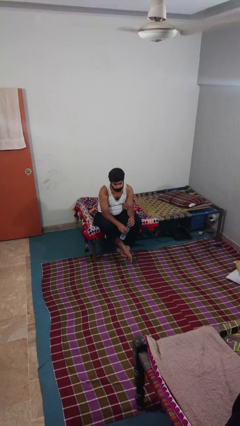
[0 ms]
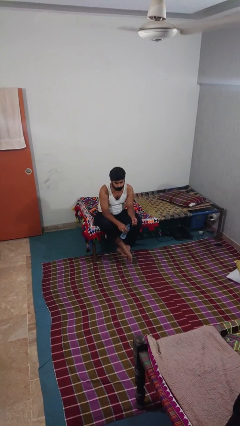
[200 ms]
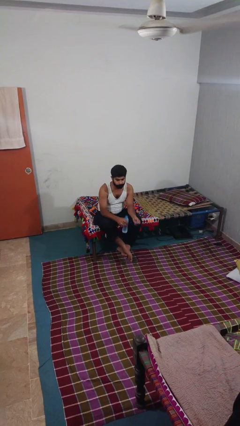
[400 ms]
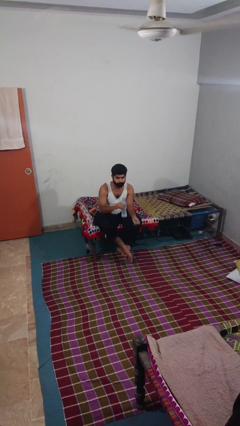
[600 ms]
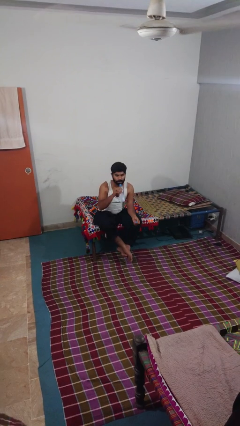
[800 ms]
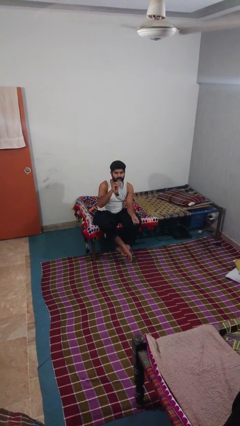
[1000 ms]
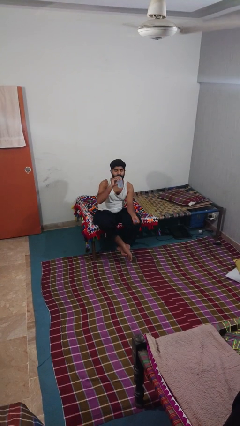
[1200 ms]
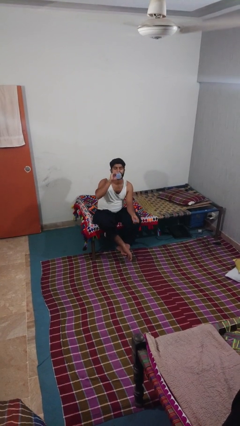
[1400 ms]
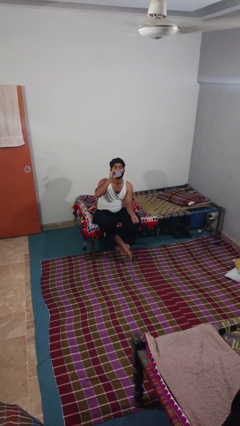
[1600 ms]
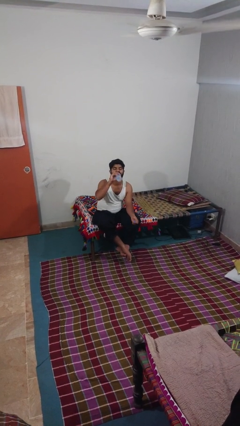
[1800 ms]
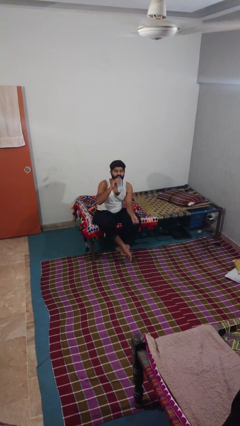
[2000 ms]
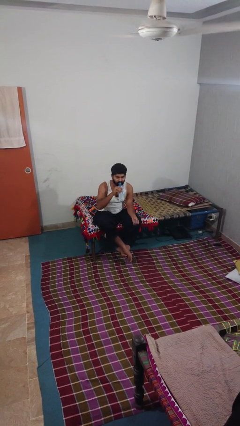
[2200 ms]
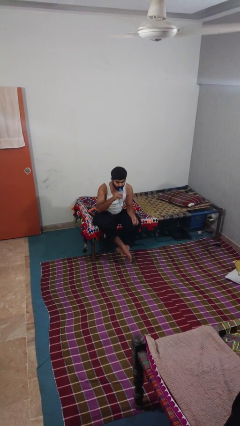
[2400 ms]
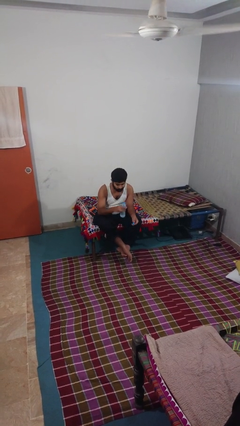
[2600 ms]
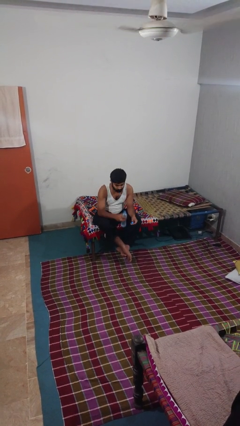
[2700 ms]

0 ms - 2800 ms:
person drinks from bottle

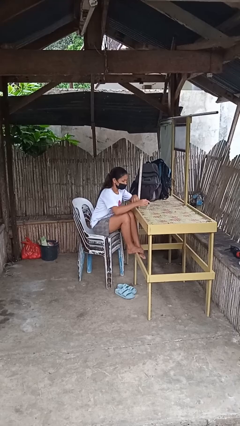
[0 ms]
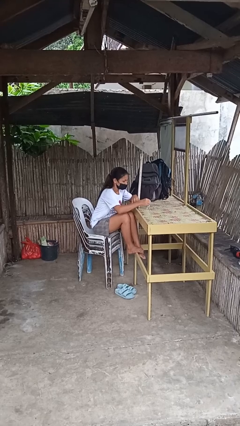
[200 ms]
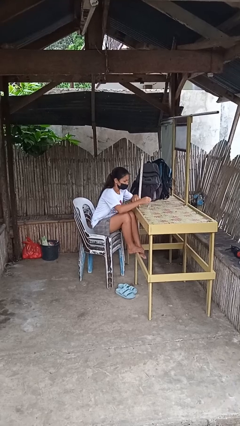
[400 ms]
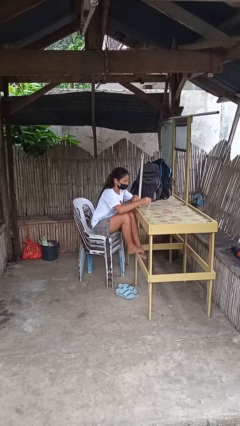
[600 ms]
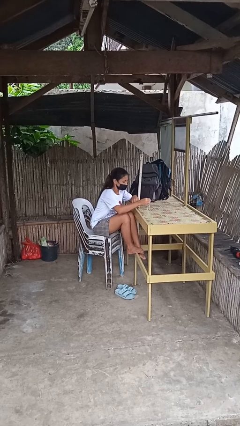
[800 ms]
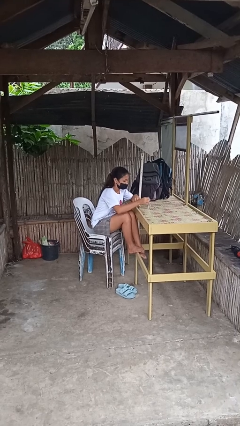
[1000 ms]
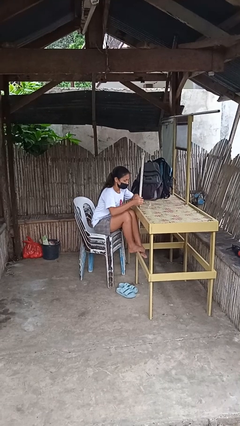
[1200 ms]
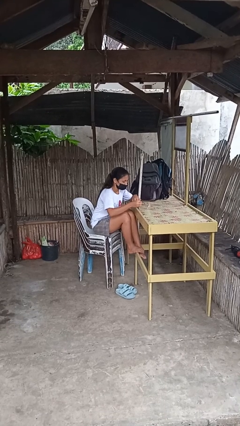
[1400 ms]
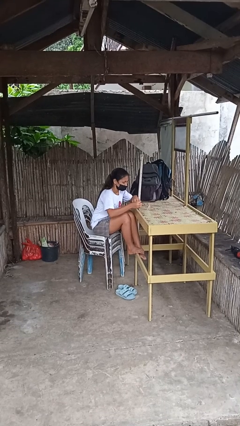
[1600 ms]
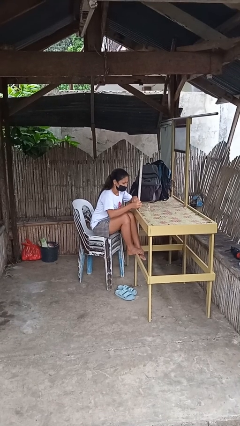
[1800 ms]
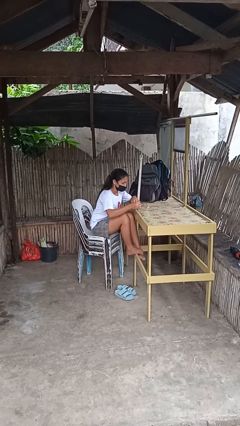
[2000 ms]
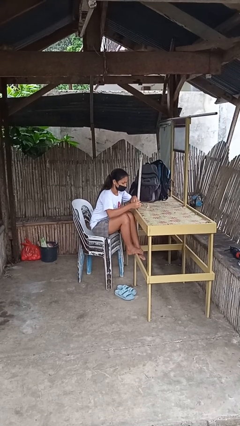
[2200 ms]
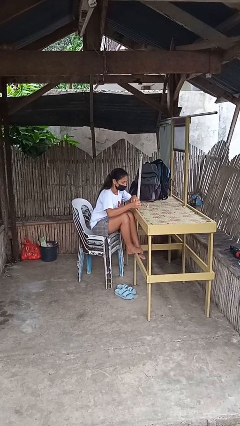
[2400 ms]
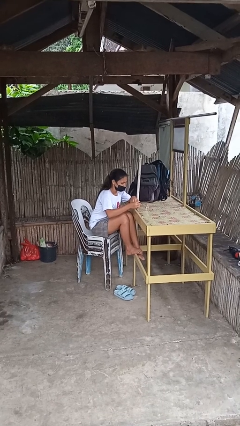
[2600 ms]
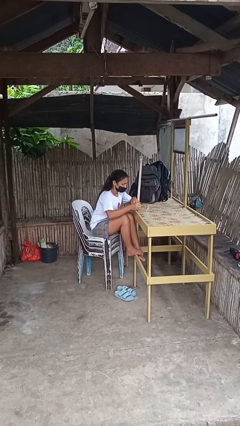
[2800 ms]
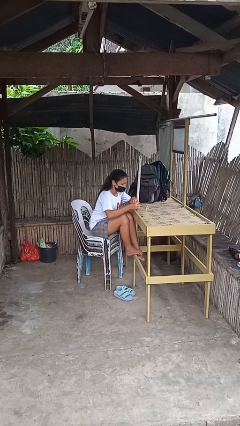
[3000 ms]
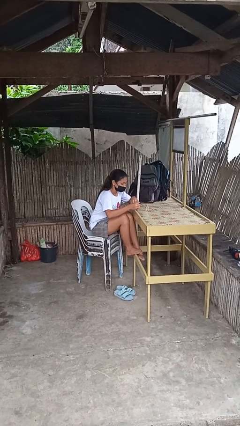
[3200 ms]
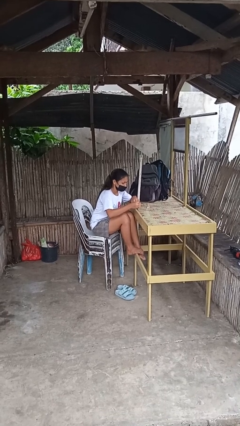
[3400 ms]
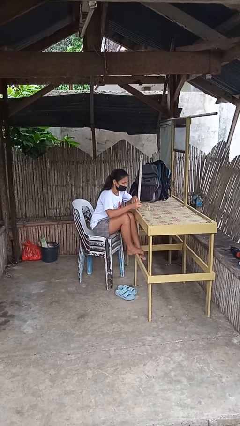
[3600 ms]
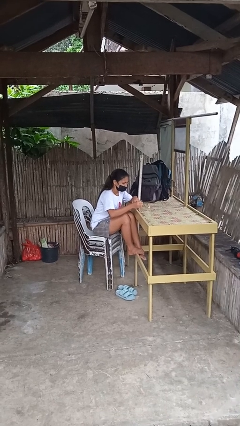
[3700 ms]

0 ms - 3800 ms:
person paints fingernails

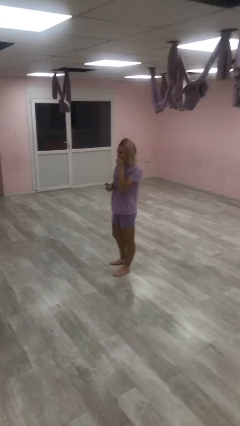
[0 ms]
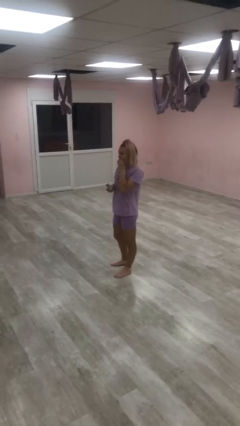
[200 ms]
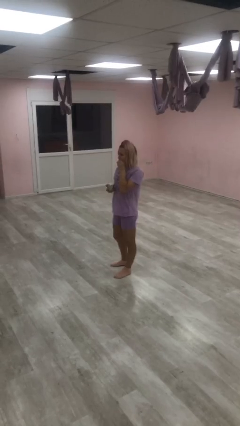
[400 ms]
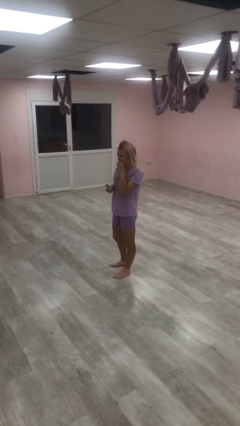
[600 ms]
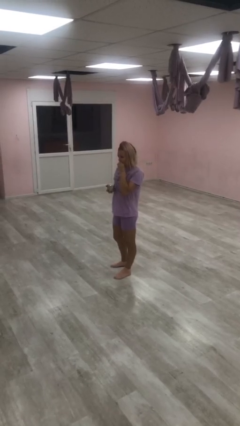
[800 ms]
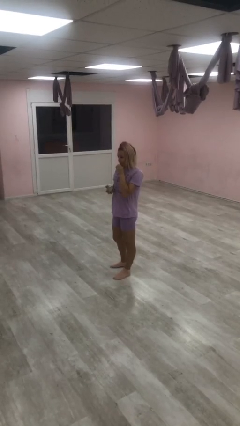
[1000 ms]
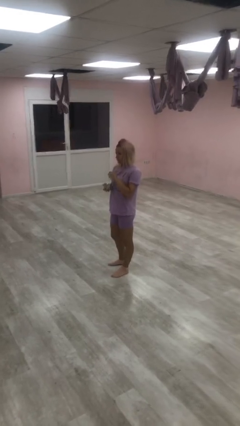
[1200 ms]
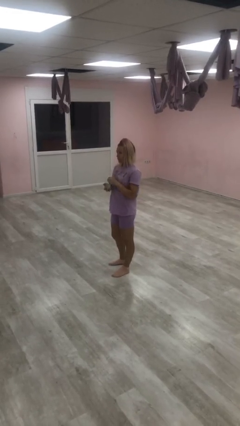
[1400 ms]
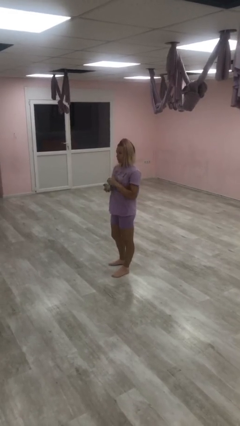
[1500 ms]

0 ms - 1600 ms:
person eats snack from bag

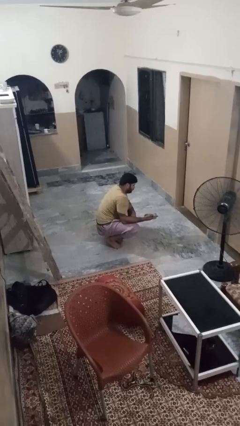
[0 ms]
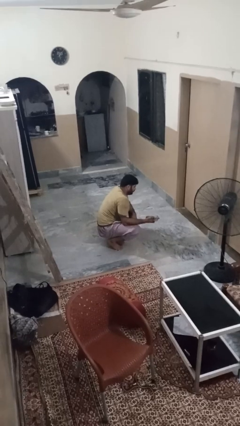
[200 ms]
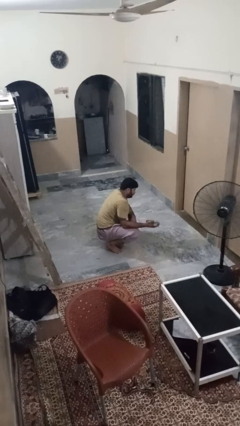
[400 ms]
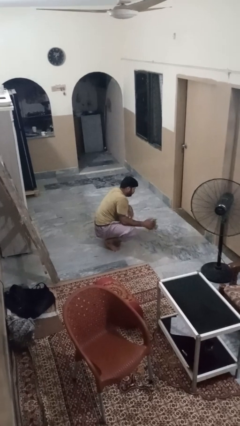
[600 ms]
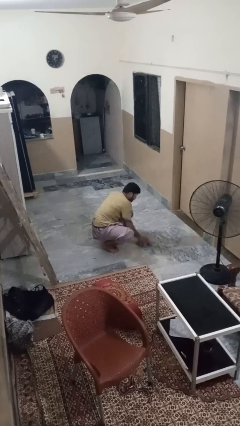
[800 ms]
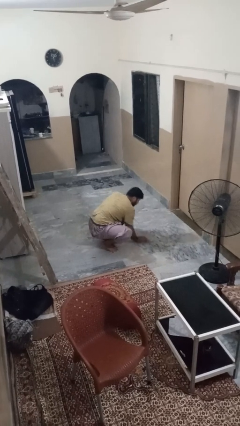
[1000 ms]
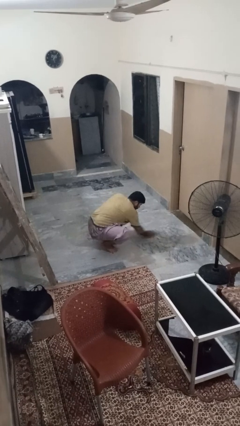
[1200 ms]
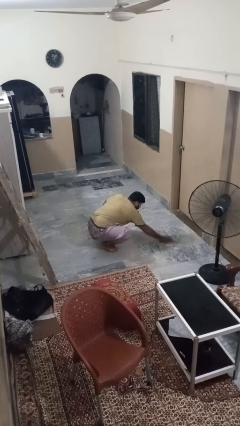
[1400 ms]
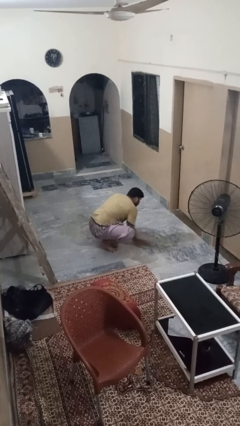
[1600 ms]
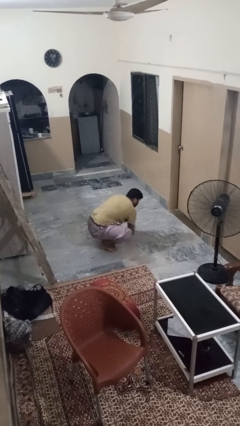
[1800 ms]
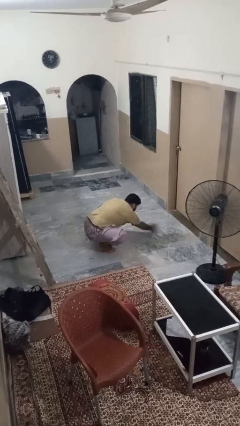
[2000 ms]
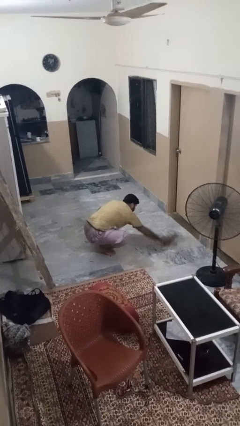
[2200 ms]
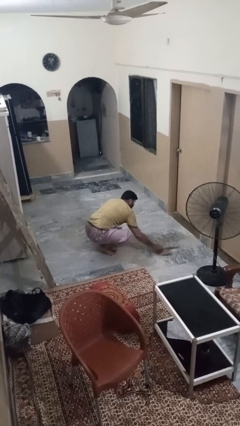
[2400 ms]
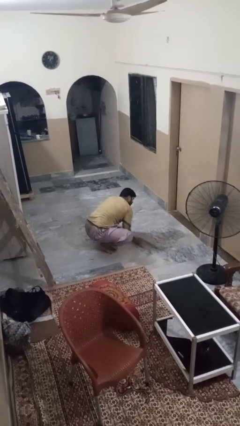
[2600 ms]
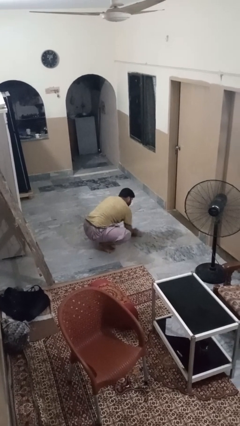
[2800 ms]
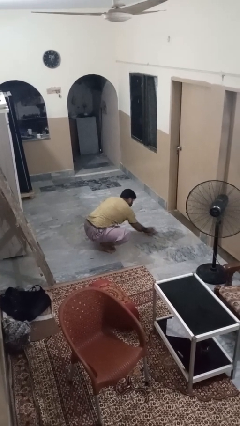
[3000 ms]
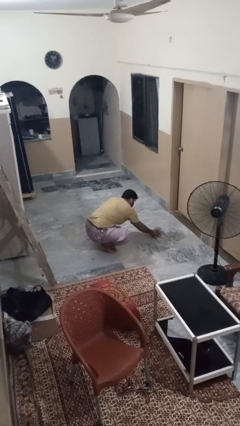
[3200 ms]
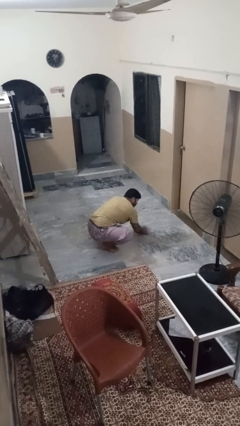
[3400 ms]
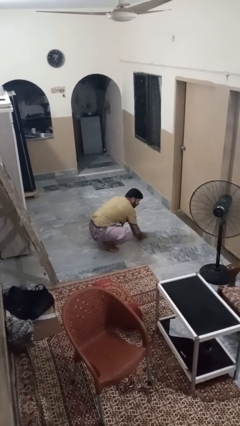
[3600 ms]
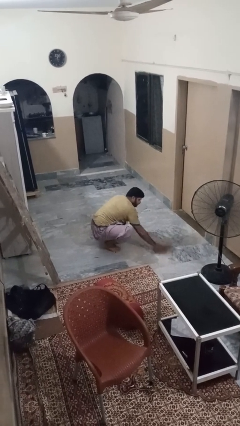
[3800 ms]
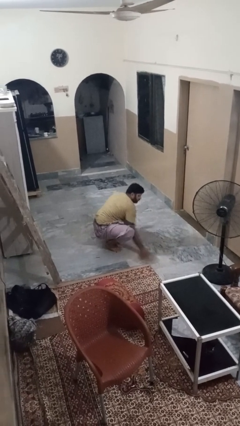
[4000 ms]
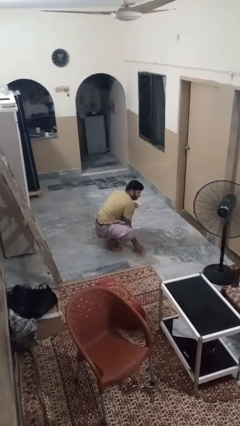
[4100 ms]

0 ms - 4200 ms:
person mops

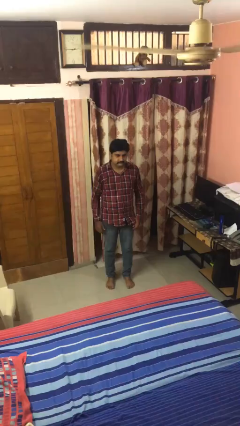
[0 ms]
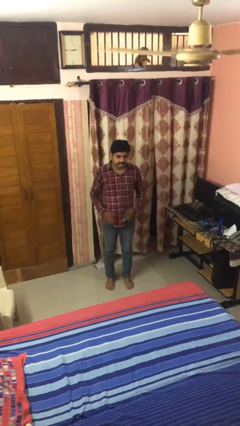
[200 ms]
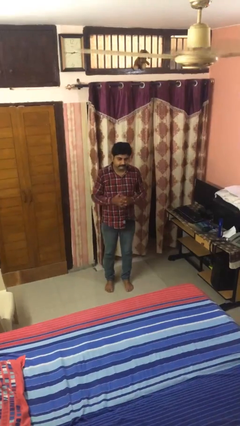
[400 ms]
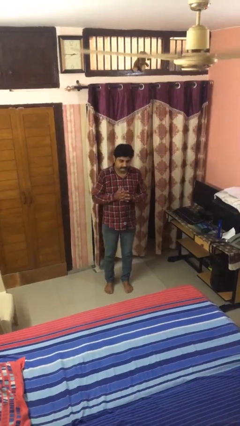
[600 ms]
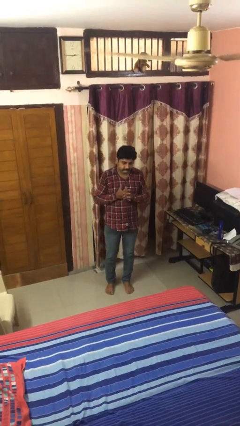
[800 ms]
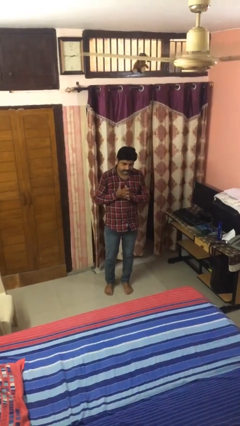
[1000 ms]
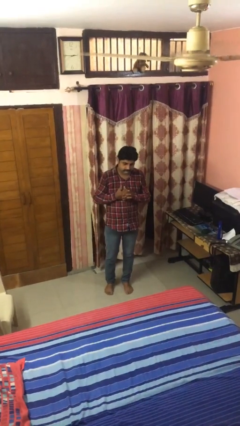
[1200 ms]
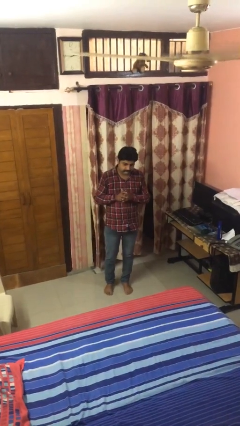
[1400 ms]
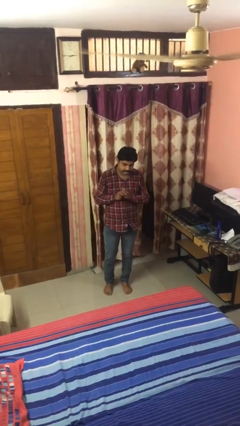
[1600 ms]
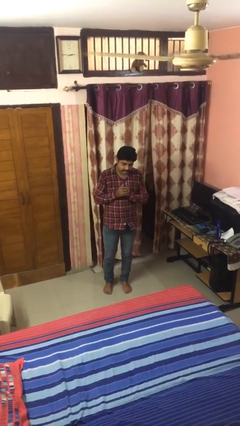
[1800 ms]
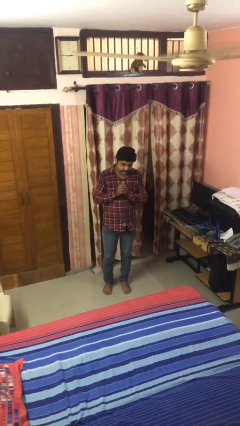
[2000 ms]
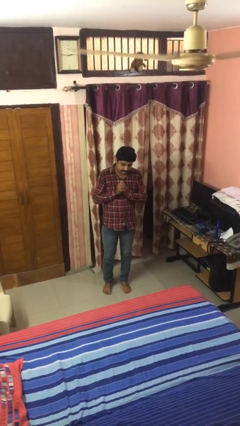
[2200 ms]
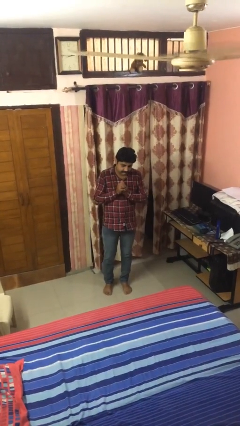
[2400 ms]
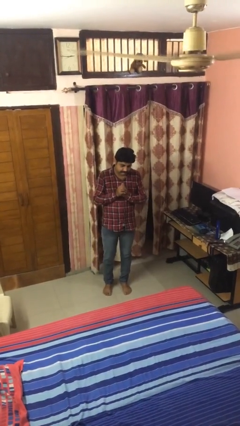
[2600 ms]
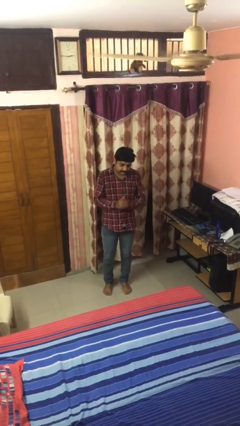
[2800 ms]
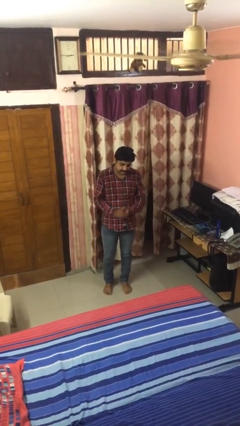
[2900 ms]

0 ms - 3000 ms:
person cracks knuckles

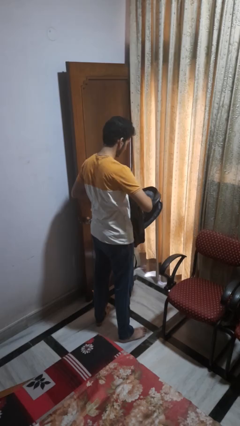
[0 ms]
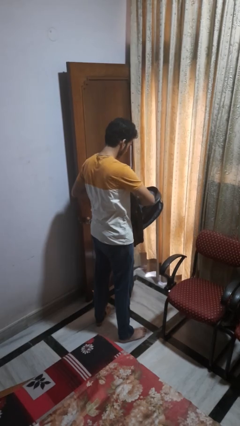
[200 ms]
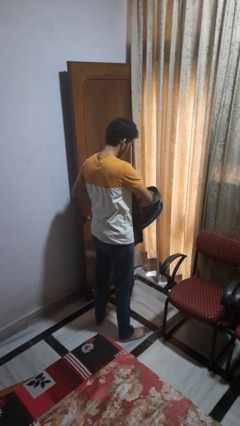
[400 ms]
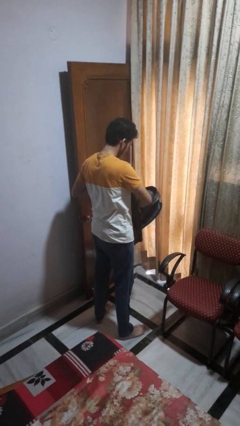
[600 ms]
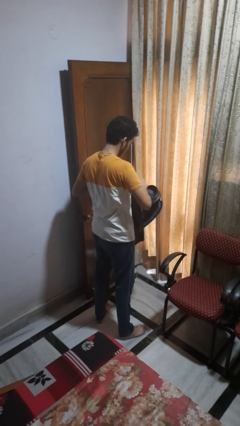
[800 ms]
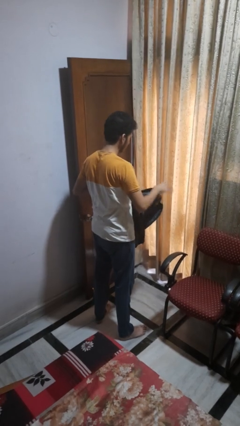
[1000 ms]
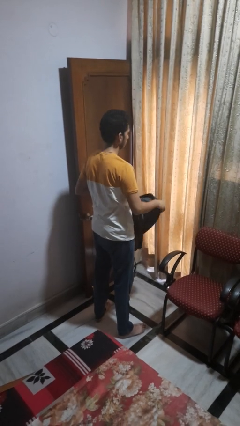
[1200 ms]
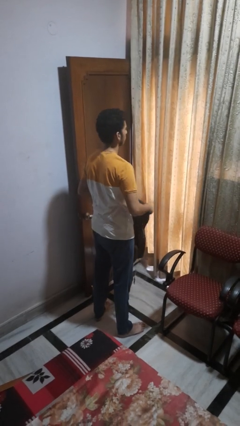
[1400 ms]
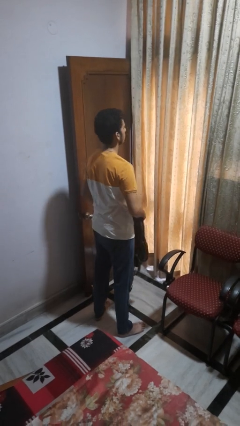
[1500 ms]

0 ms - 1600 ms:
person puts object into backpack

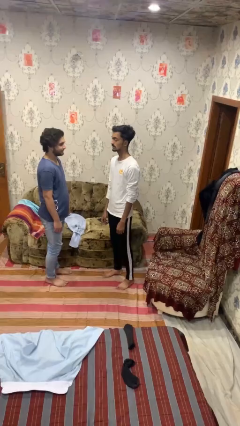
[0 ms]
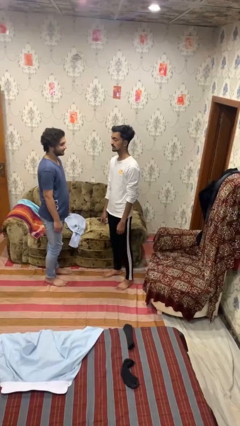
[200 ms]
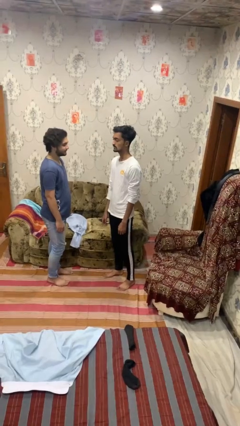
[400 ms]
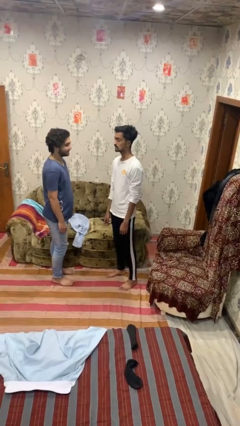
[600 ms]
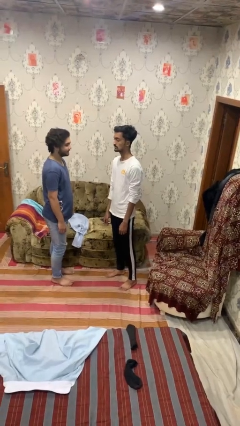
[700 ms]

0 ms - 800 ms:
person bumps into person
